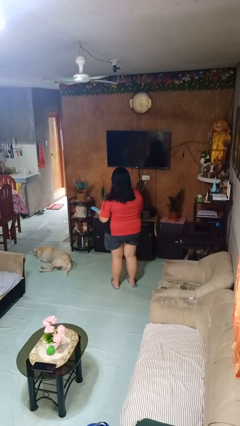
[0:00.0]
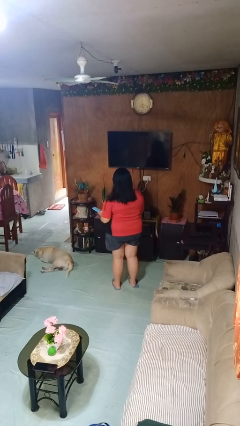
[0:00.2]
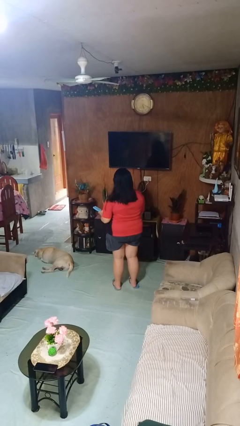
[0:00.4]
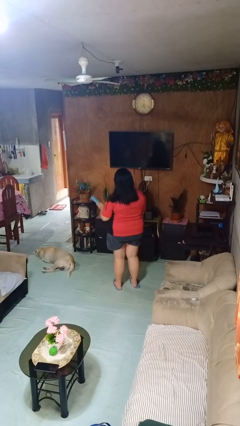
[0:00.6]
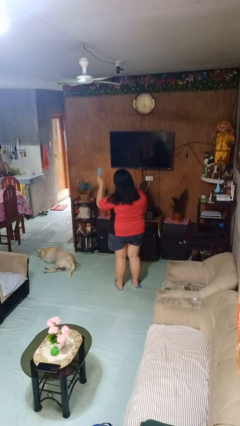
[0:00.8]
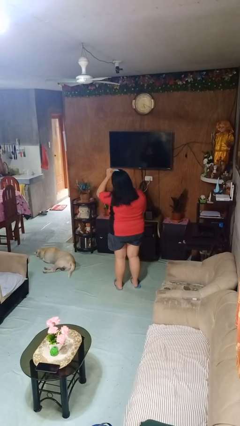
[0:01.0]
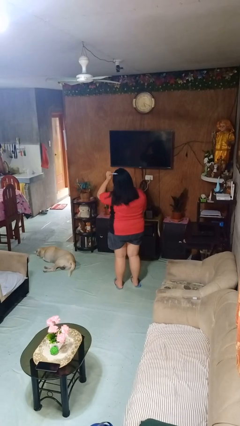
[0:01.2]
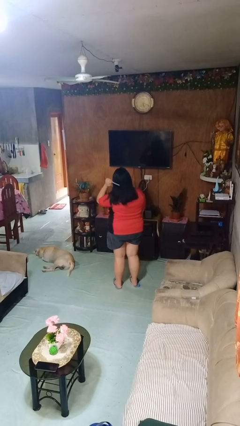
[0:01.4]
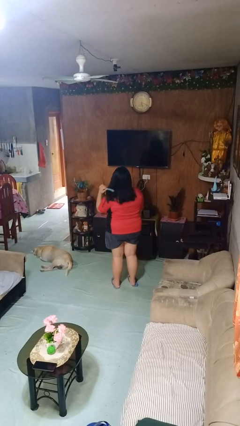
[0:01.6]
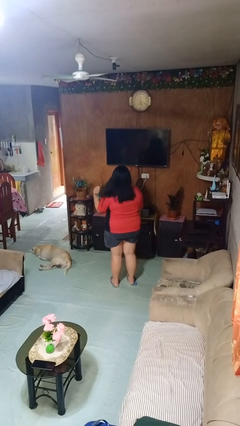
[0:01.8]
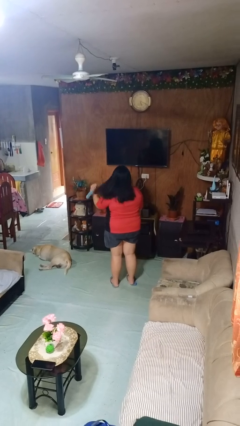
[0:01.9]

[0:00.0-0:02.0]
person brushes hair

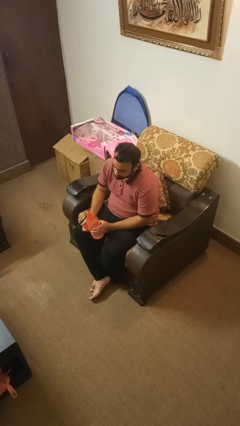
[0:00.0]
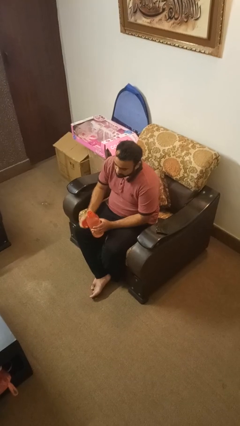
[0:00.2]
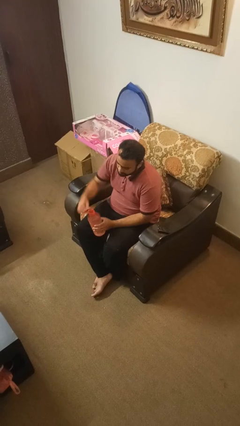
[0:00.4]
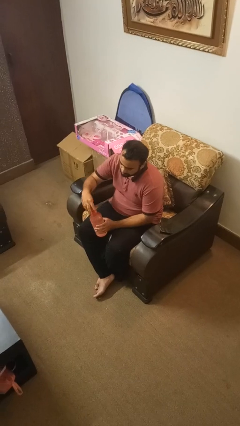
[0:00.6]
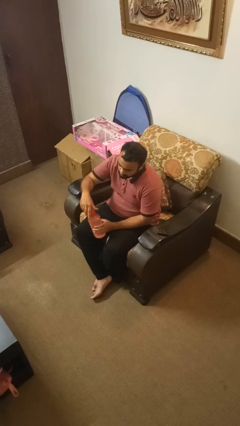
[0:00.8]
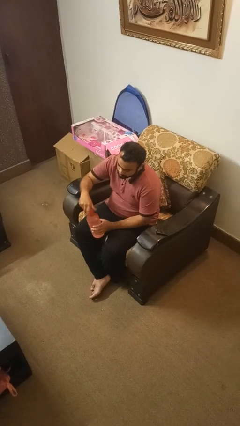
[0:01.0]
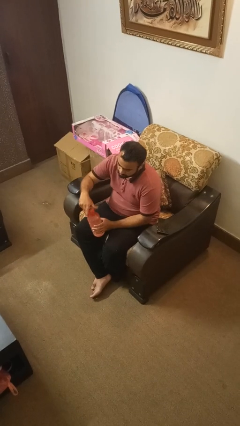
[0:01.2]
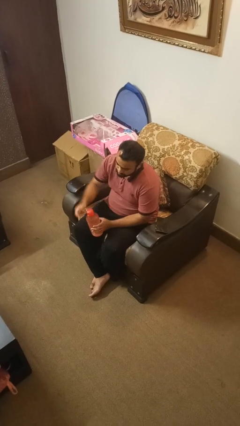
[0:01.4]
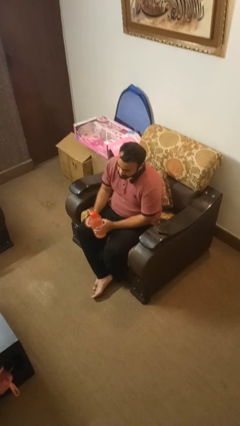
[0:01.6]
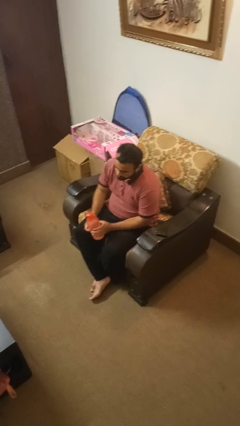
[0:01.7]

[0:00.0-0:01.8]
person screws lid to bottle

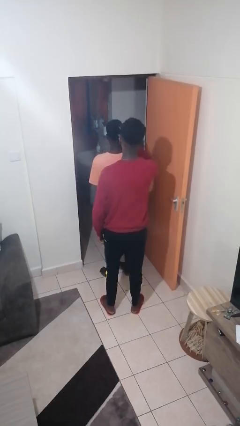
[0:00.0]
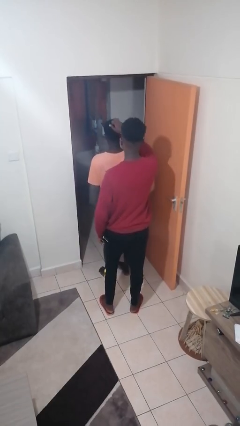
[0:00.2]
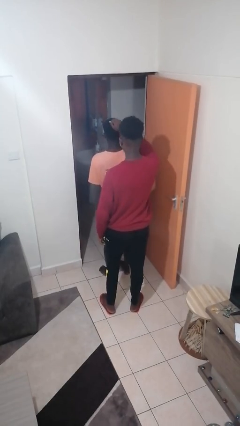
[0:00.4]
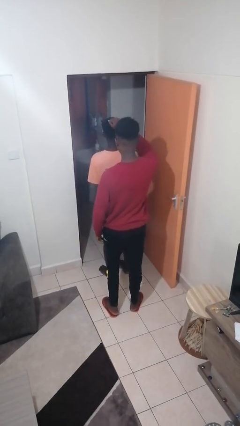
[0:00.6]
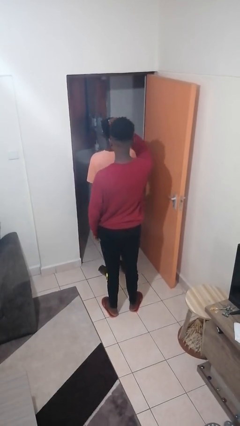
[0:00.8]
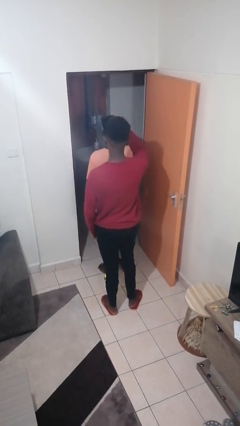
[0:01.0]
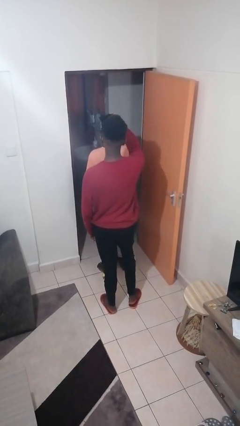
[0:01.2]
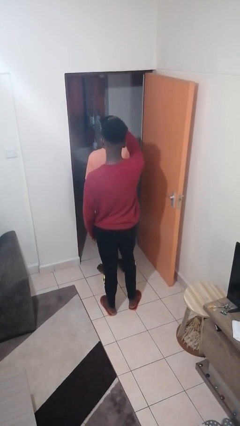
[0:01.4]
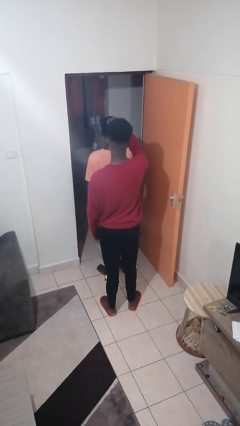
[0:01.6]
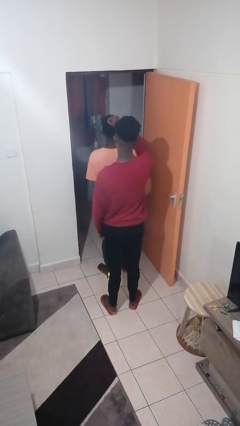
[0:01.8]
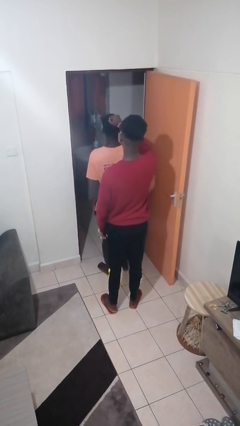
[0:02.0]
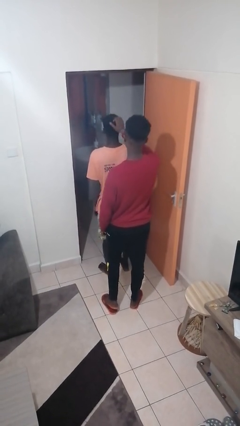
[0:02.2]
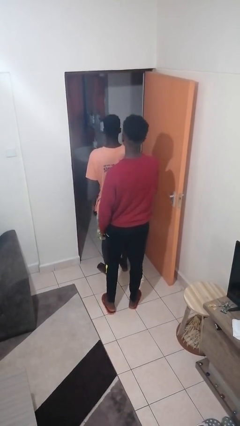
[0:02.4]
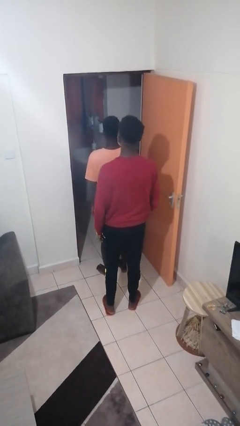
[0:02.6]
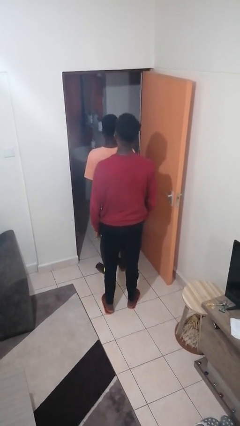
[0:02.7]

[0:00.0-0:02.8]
person grabs person by hair

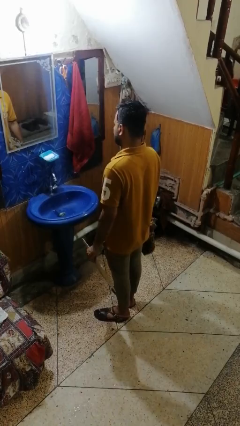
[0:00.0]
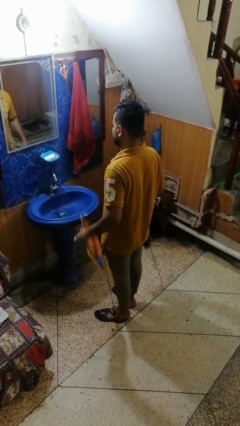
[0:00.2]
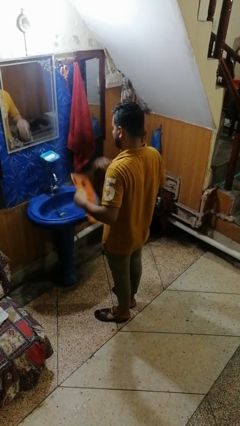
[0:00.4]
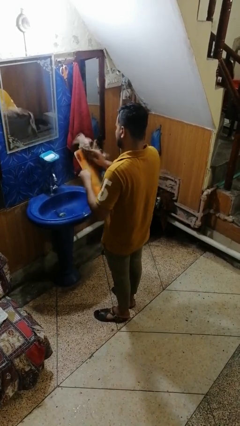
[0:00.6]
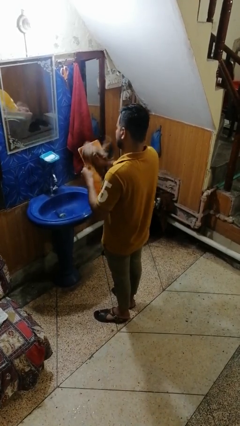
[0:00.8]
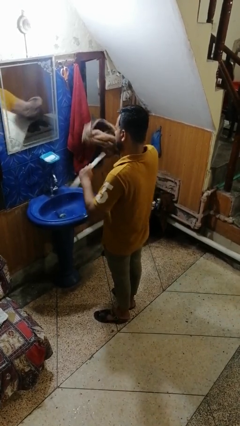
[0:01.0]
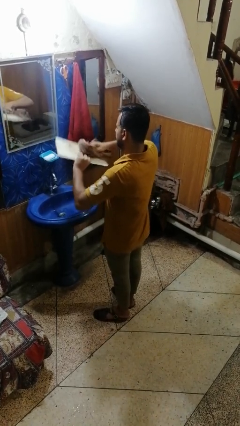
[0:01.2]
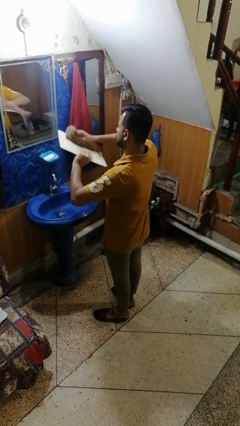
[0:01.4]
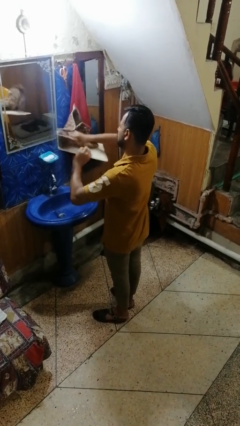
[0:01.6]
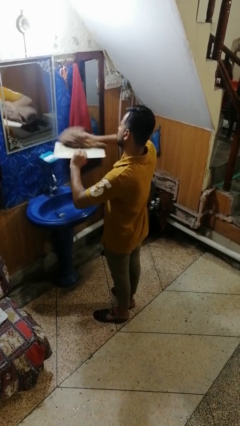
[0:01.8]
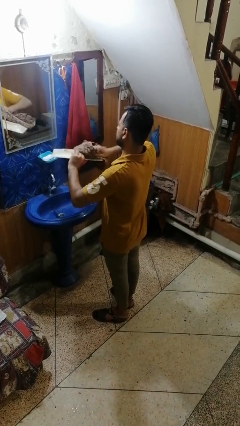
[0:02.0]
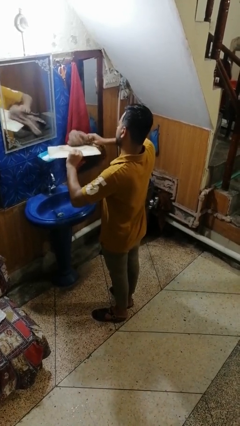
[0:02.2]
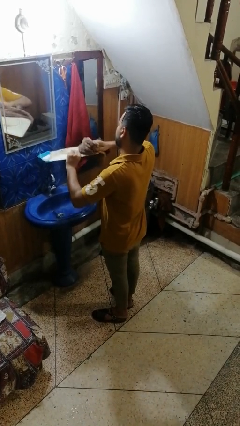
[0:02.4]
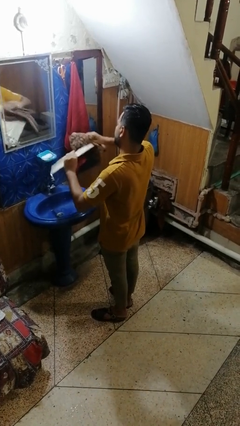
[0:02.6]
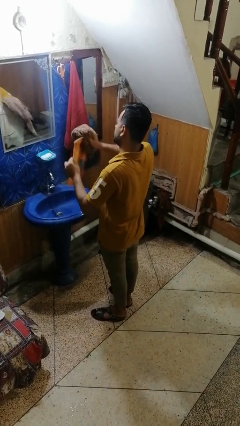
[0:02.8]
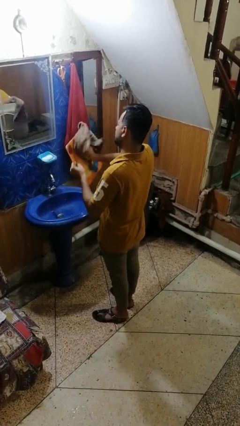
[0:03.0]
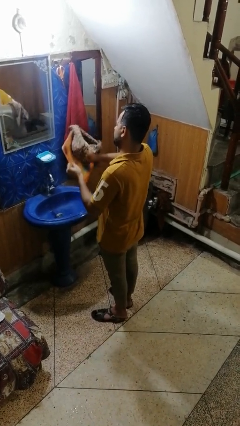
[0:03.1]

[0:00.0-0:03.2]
person dries dish

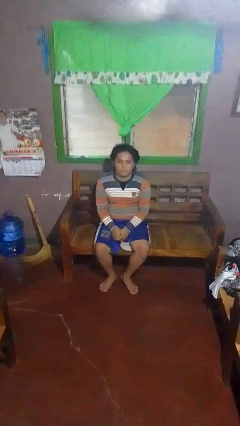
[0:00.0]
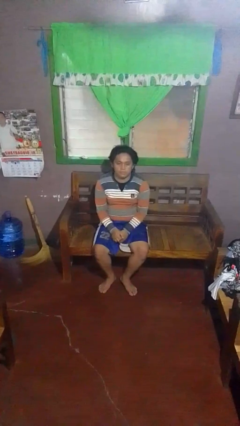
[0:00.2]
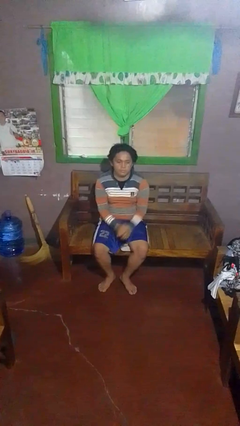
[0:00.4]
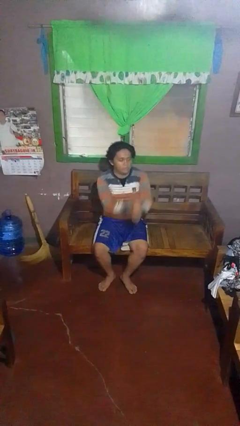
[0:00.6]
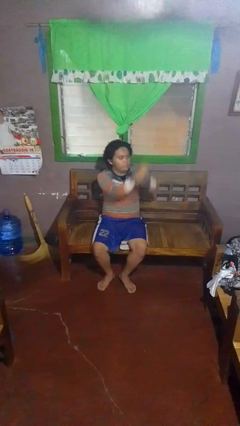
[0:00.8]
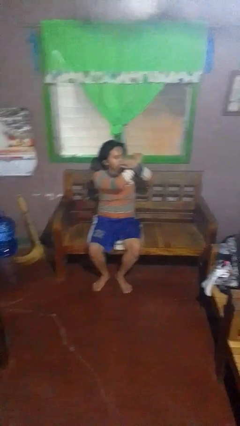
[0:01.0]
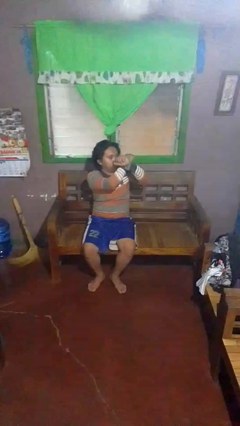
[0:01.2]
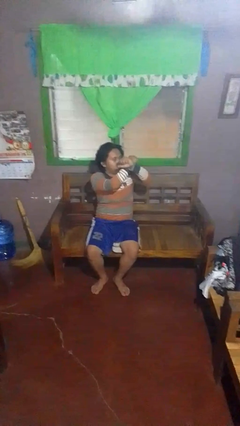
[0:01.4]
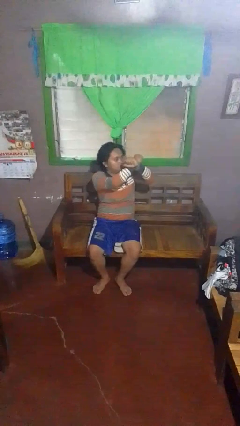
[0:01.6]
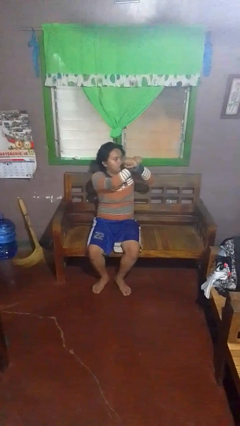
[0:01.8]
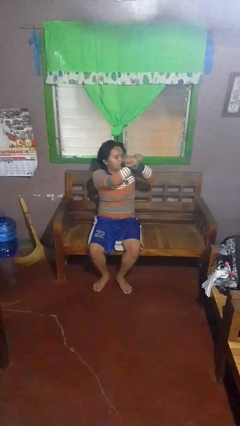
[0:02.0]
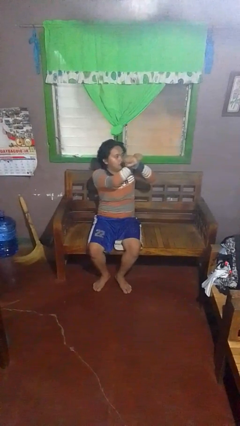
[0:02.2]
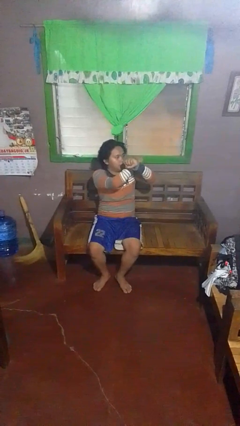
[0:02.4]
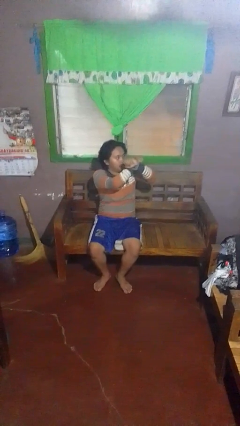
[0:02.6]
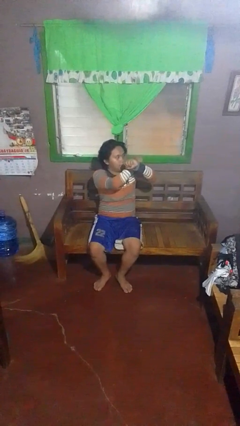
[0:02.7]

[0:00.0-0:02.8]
person gestures arms x

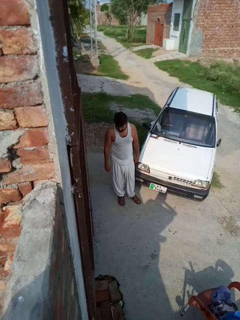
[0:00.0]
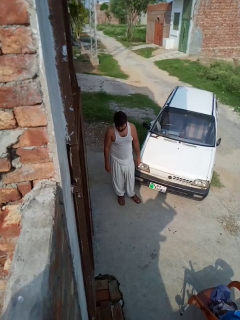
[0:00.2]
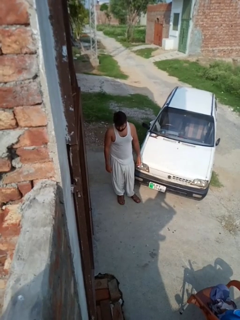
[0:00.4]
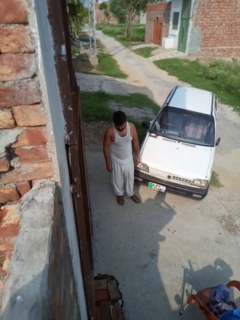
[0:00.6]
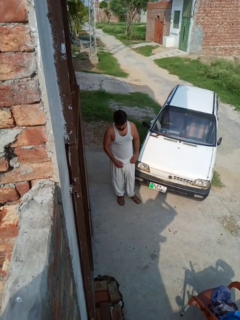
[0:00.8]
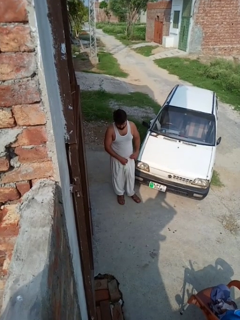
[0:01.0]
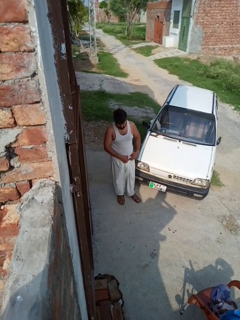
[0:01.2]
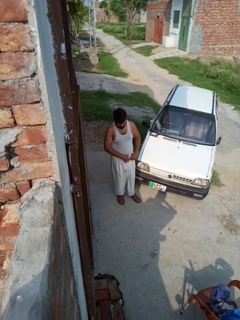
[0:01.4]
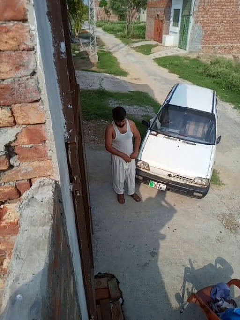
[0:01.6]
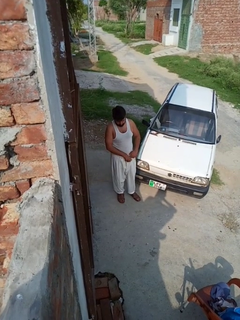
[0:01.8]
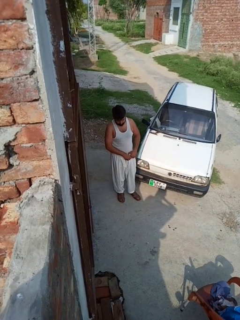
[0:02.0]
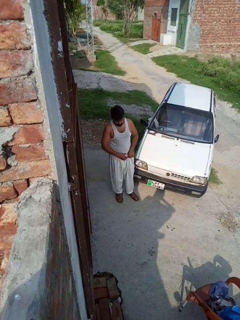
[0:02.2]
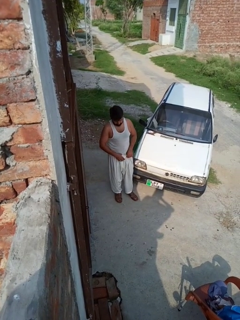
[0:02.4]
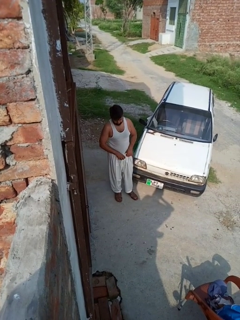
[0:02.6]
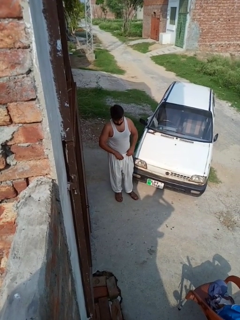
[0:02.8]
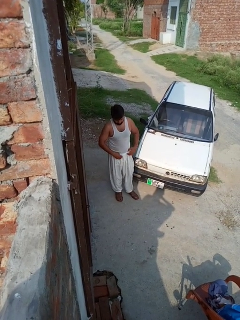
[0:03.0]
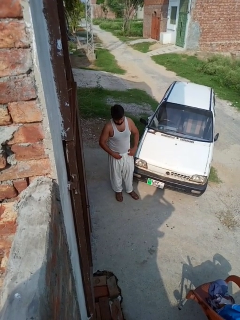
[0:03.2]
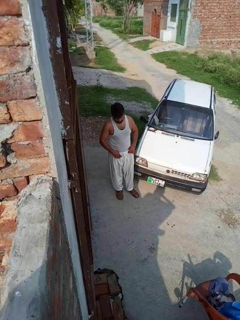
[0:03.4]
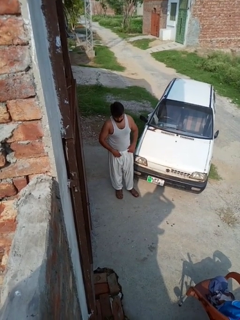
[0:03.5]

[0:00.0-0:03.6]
person tucks in shirt

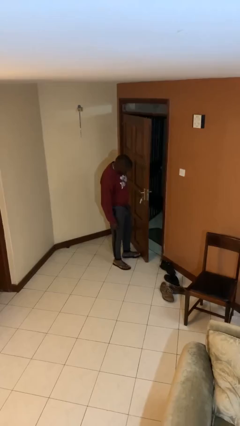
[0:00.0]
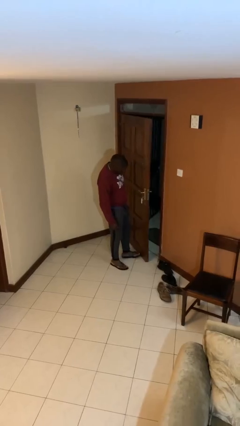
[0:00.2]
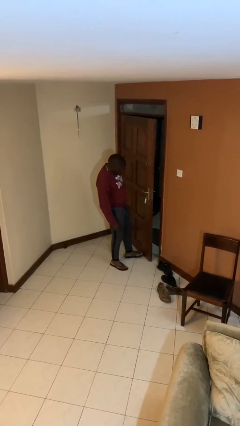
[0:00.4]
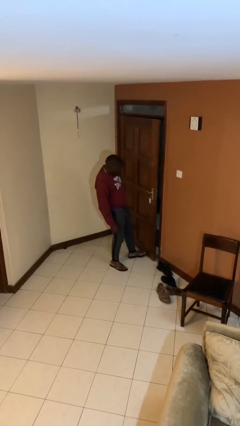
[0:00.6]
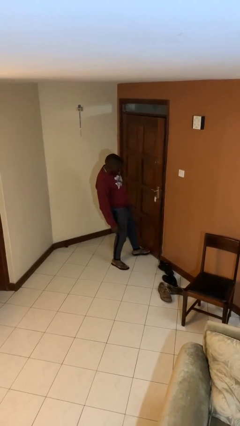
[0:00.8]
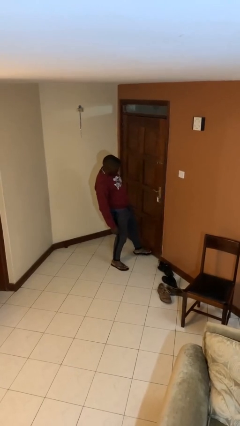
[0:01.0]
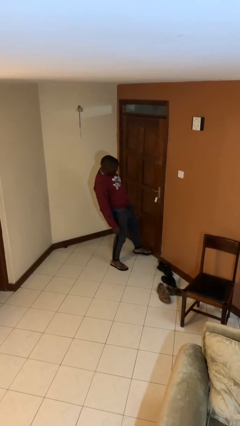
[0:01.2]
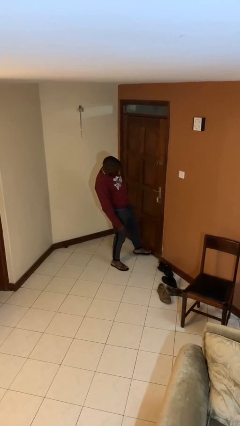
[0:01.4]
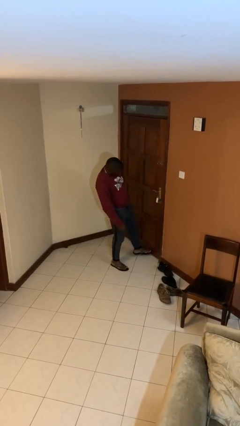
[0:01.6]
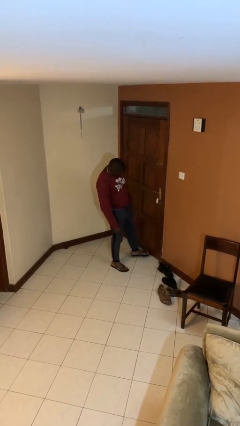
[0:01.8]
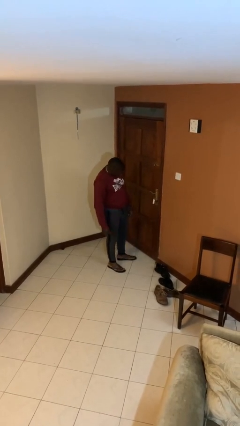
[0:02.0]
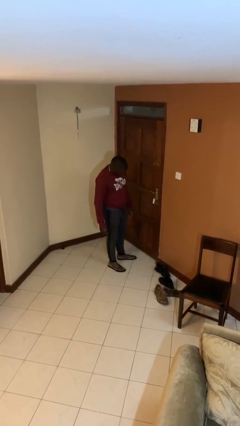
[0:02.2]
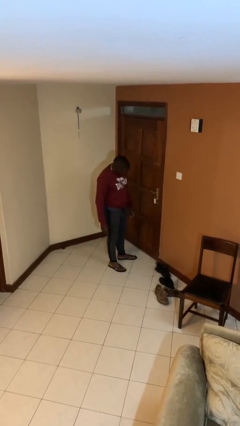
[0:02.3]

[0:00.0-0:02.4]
person closes door with foot
